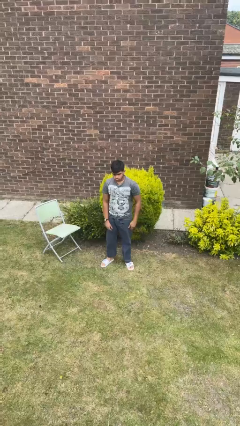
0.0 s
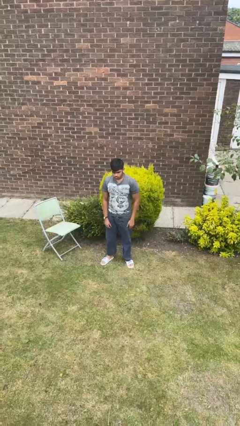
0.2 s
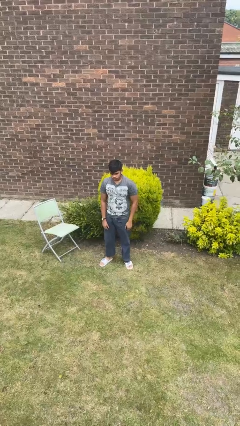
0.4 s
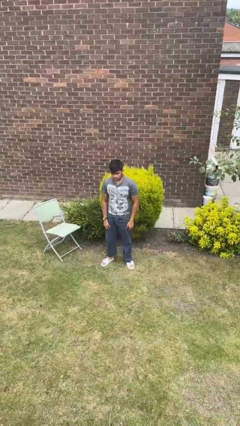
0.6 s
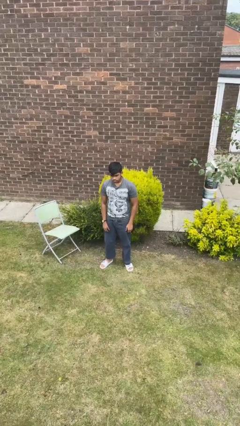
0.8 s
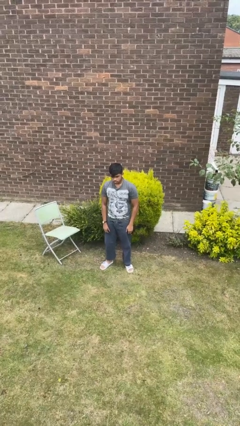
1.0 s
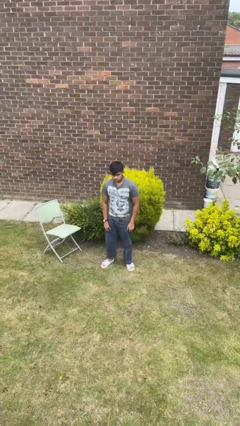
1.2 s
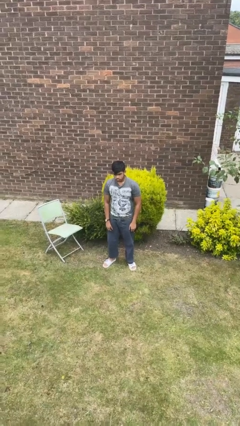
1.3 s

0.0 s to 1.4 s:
person stands up

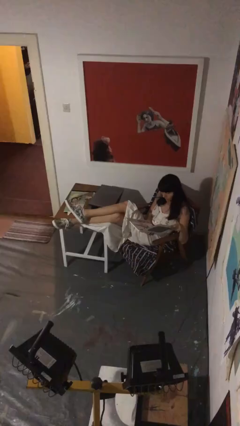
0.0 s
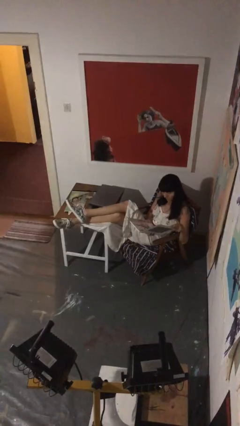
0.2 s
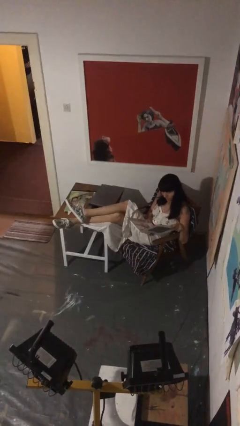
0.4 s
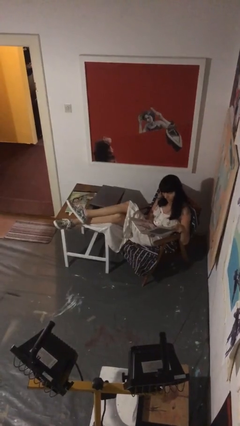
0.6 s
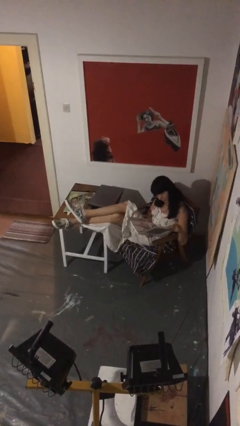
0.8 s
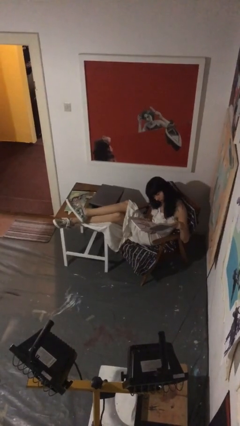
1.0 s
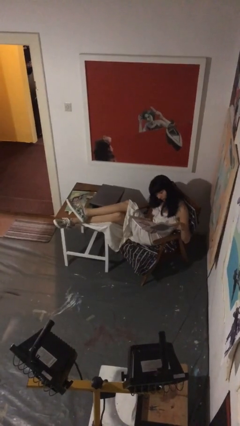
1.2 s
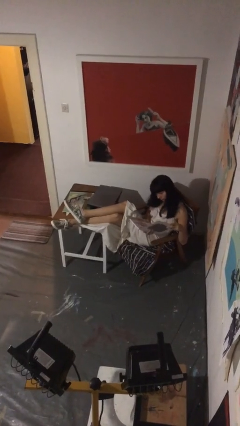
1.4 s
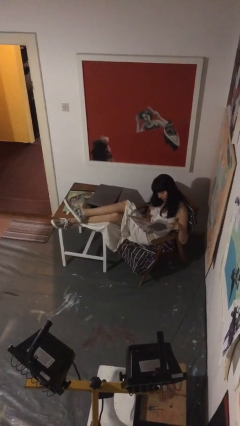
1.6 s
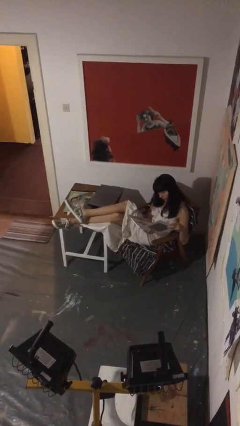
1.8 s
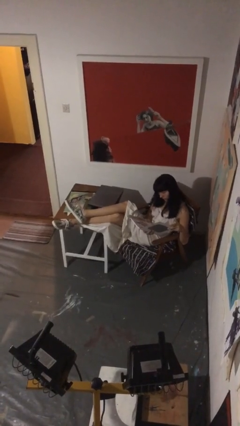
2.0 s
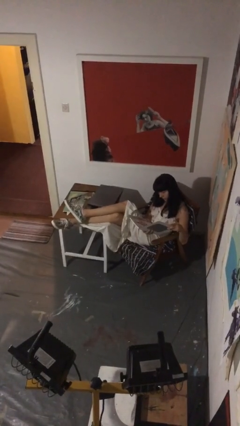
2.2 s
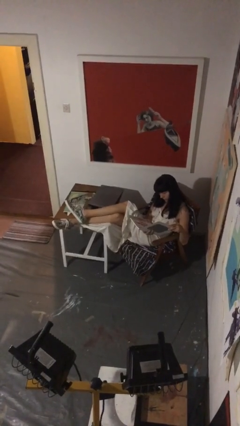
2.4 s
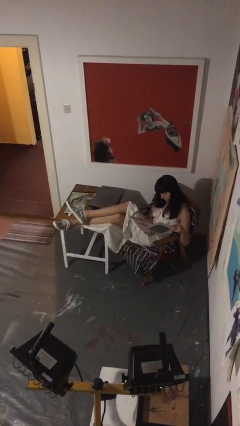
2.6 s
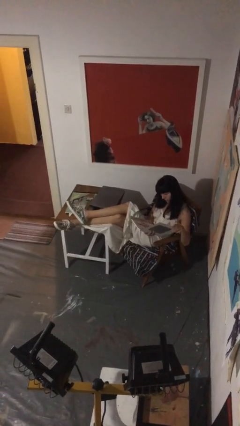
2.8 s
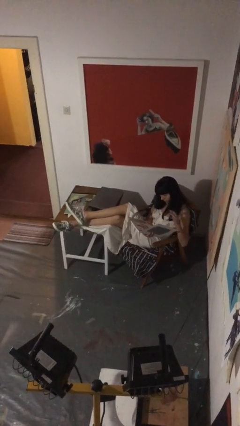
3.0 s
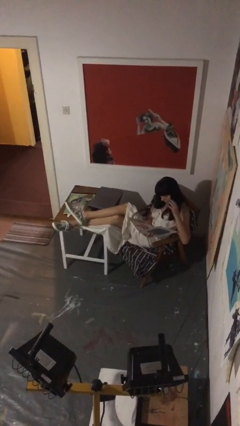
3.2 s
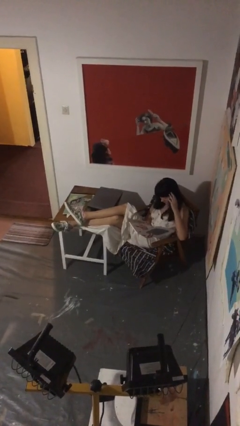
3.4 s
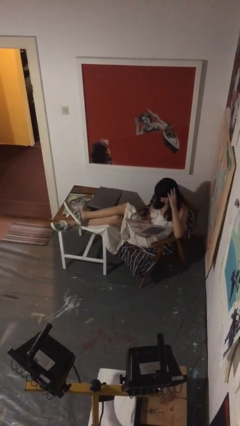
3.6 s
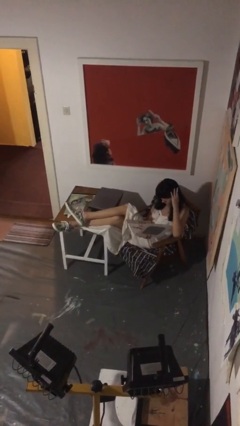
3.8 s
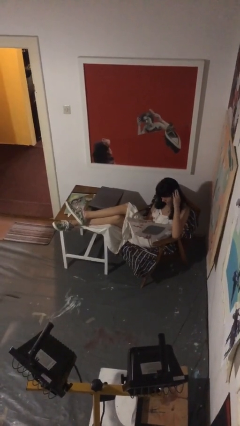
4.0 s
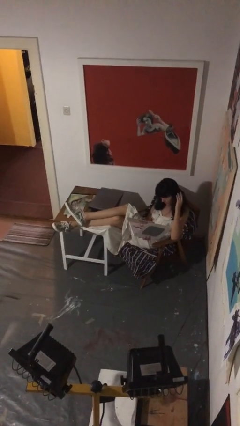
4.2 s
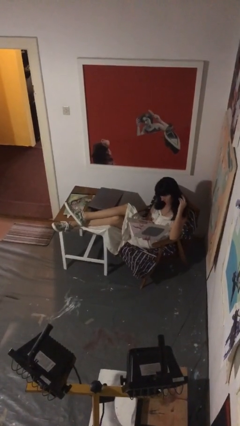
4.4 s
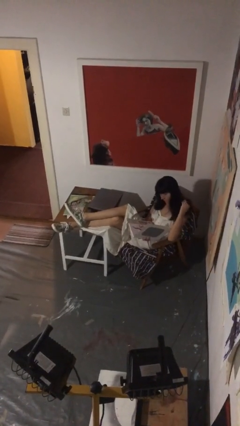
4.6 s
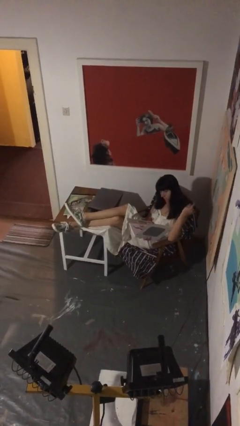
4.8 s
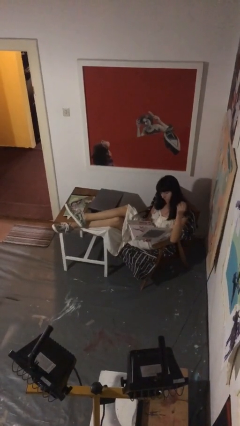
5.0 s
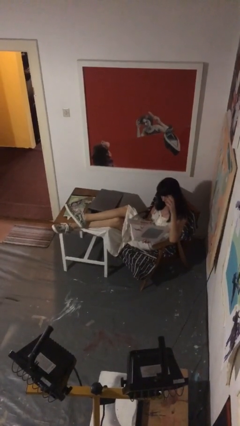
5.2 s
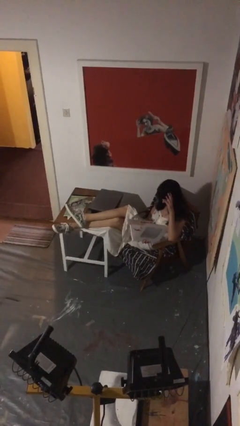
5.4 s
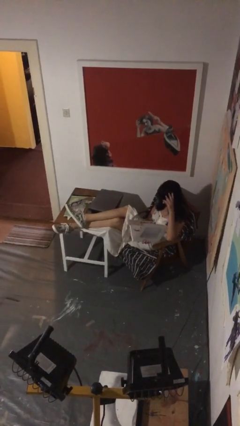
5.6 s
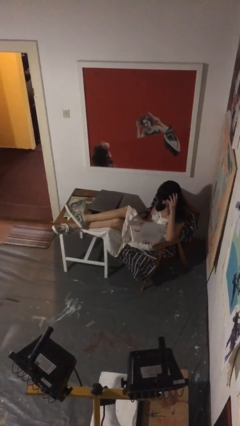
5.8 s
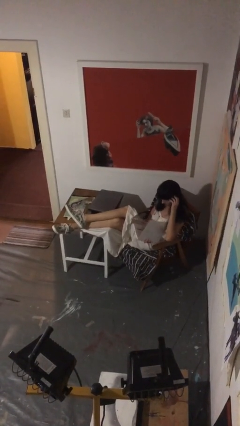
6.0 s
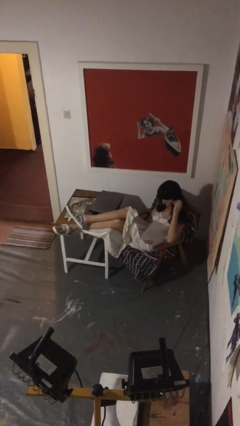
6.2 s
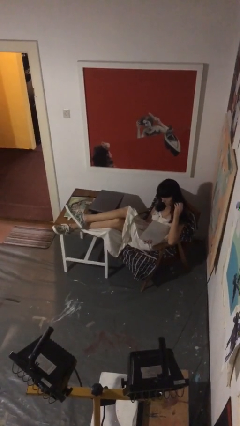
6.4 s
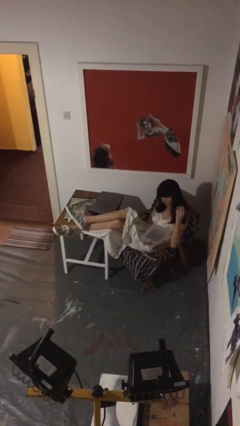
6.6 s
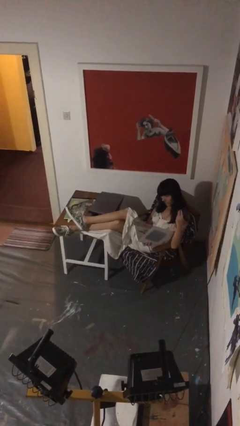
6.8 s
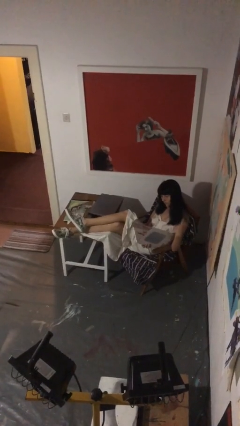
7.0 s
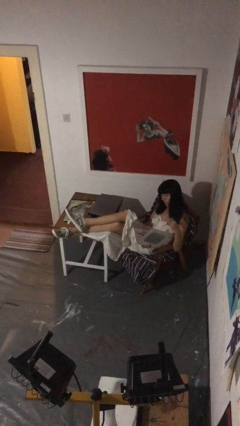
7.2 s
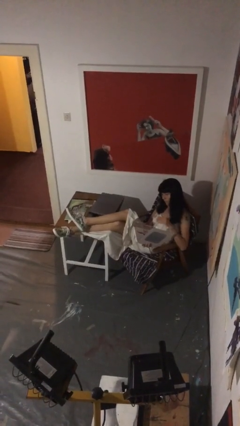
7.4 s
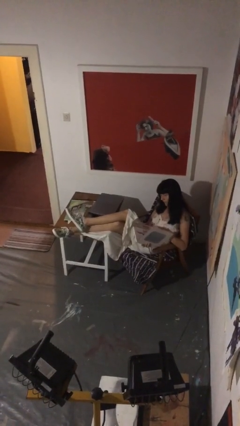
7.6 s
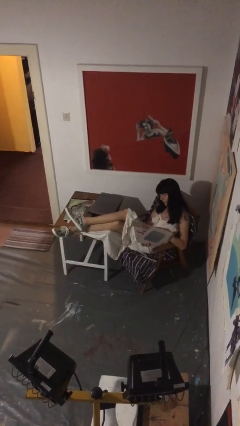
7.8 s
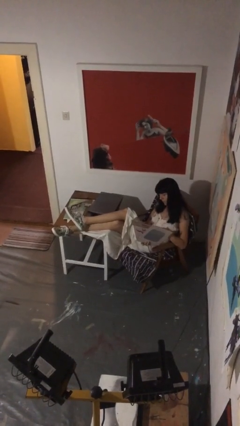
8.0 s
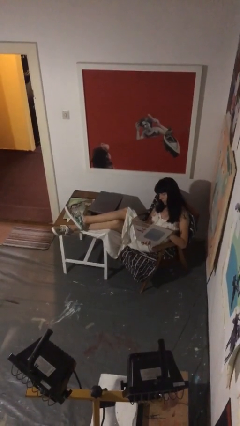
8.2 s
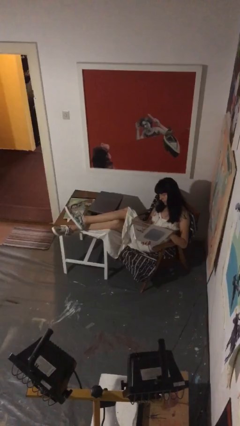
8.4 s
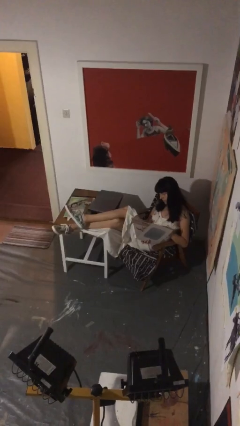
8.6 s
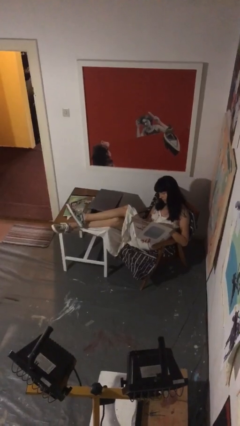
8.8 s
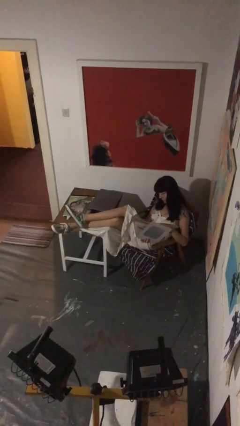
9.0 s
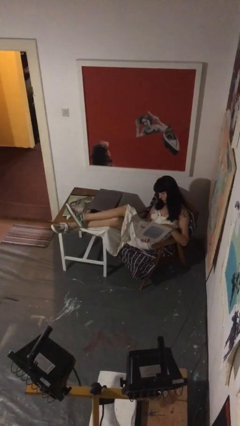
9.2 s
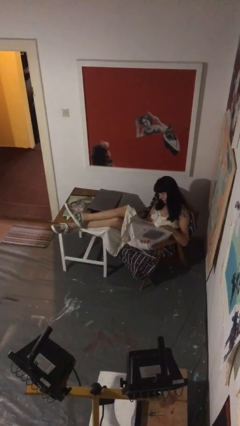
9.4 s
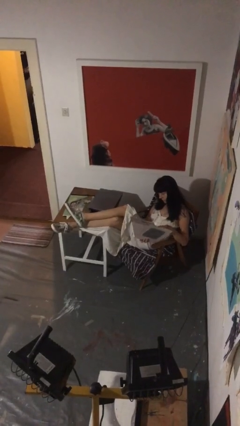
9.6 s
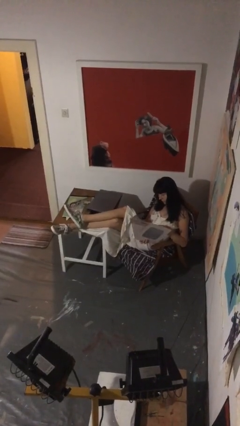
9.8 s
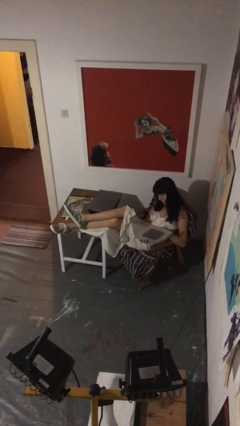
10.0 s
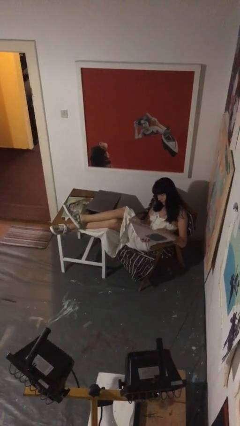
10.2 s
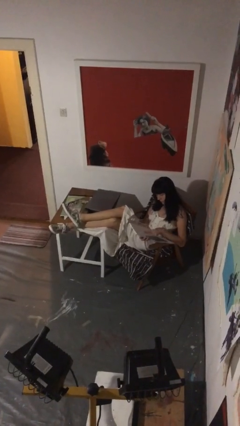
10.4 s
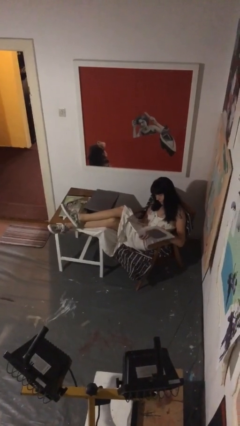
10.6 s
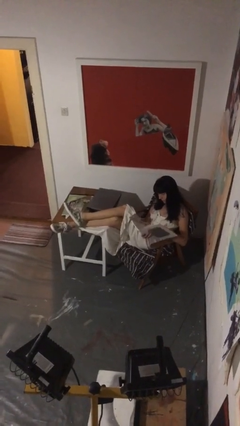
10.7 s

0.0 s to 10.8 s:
person reads document

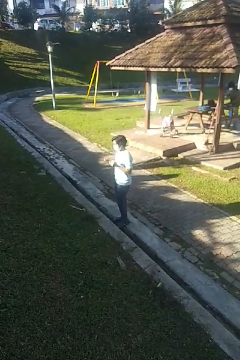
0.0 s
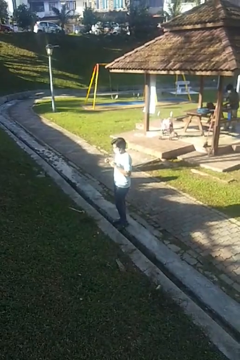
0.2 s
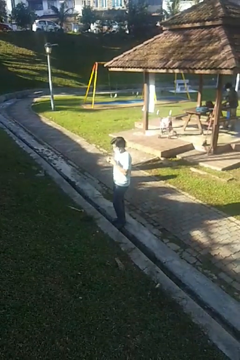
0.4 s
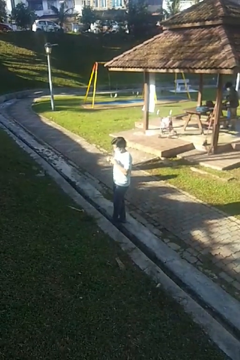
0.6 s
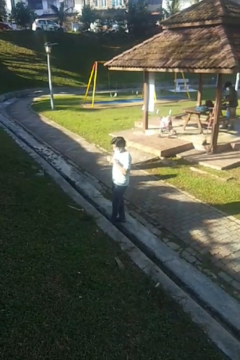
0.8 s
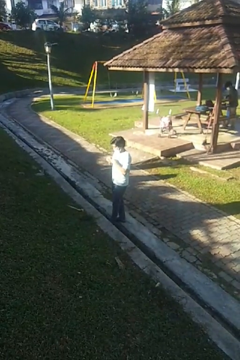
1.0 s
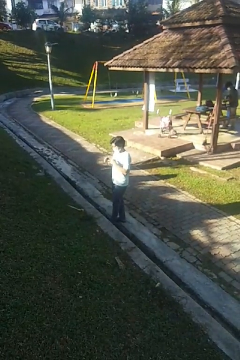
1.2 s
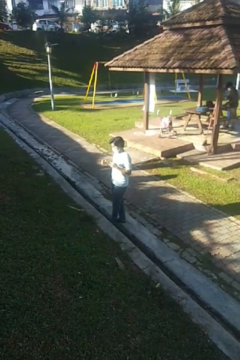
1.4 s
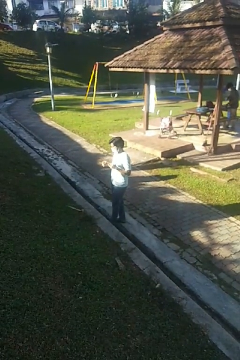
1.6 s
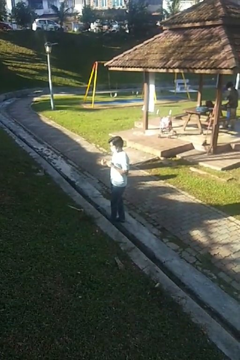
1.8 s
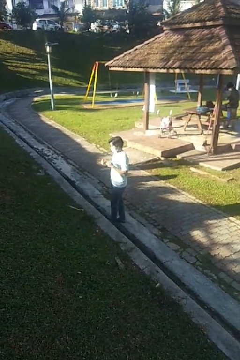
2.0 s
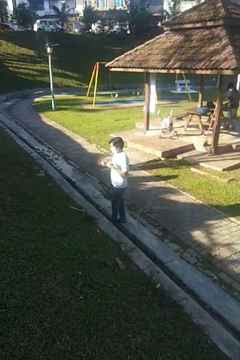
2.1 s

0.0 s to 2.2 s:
person puts on ring

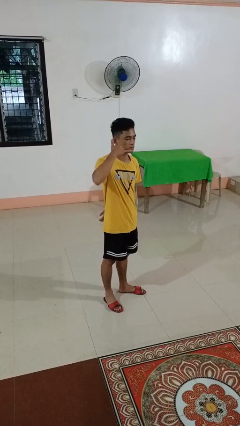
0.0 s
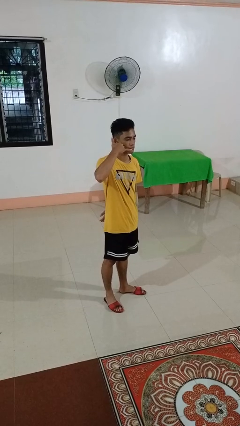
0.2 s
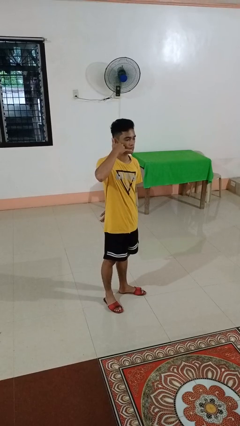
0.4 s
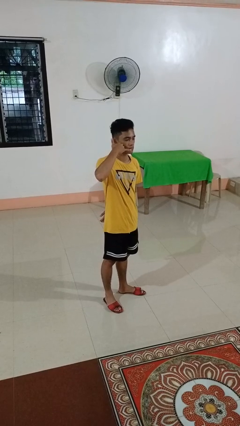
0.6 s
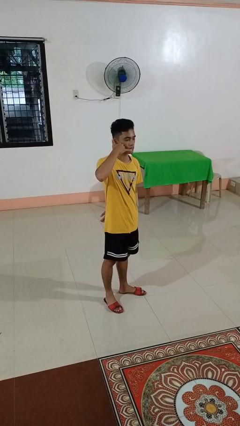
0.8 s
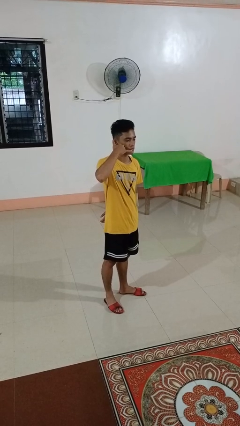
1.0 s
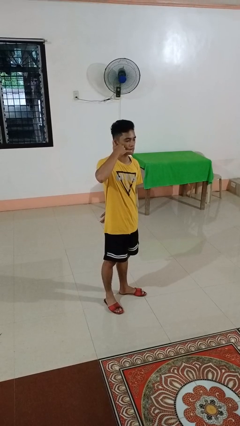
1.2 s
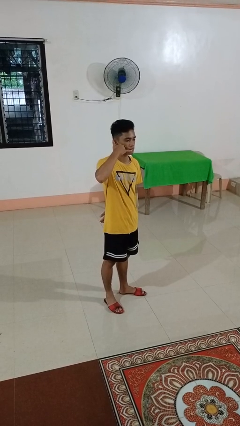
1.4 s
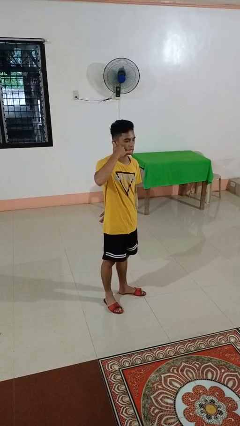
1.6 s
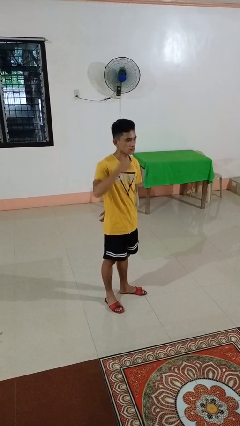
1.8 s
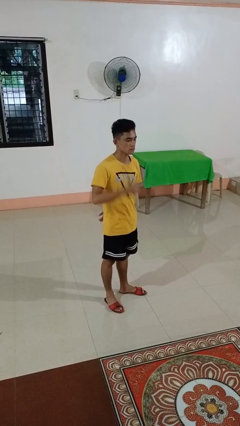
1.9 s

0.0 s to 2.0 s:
person gestures call me

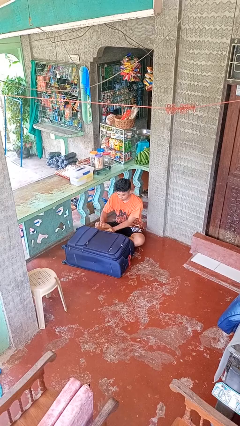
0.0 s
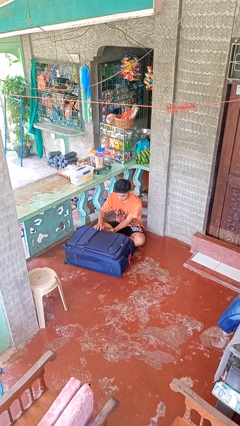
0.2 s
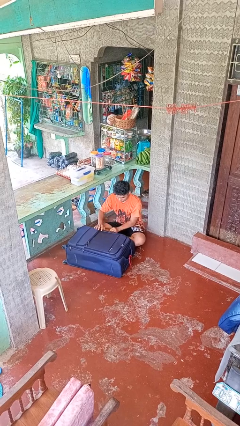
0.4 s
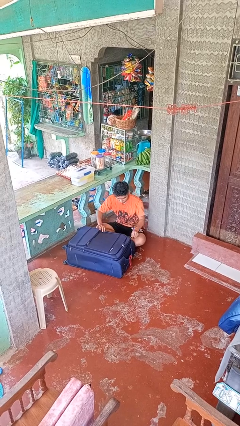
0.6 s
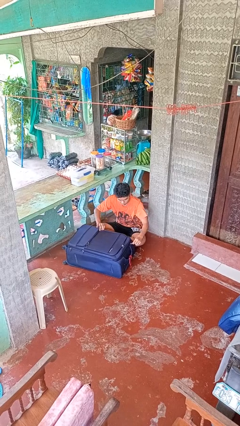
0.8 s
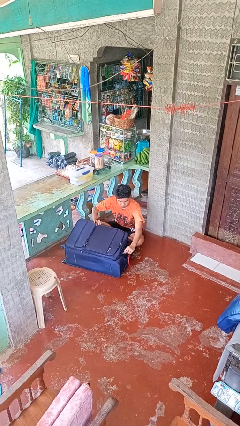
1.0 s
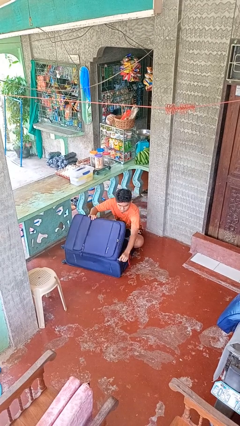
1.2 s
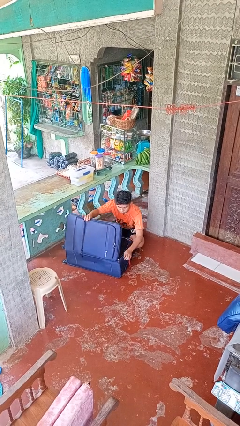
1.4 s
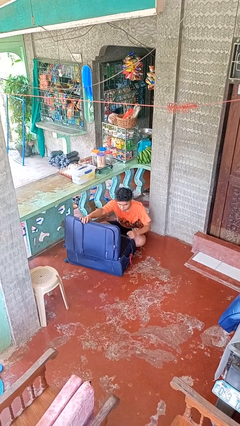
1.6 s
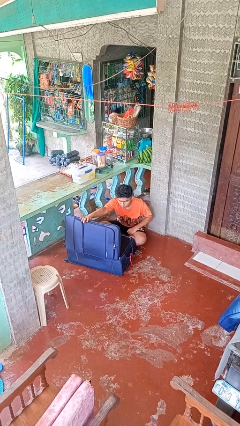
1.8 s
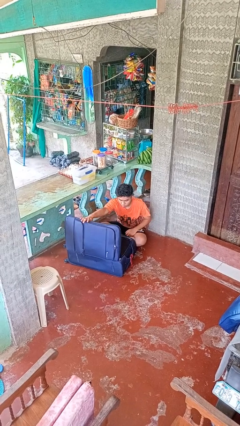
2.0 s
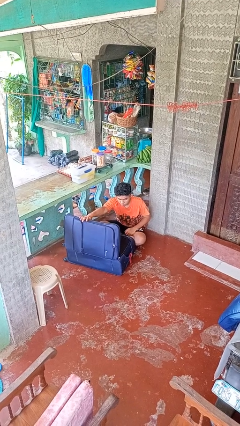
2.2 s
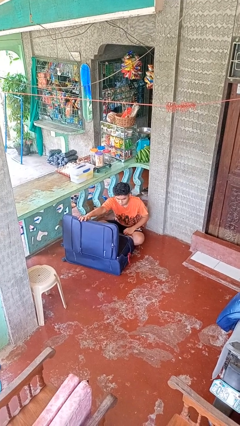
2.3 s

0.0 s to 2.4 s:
person opens suitcase
